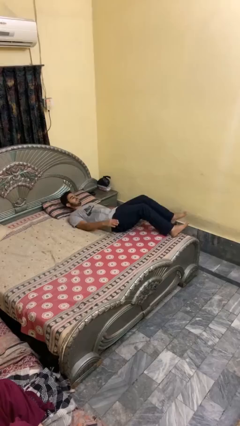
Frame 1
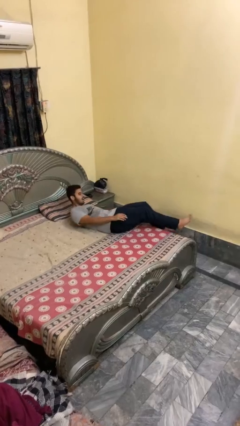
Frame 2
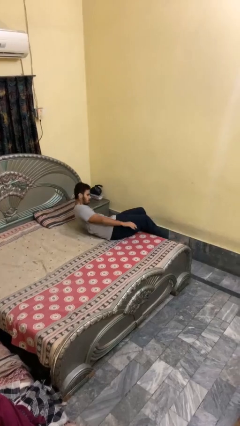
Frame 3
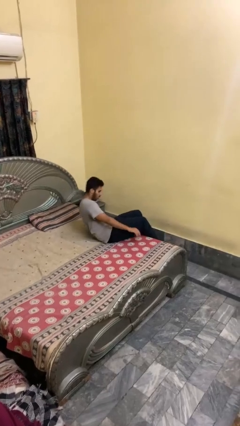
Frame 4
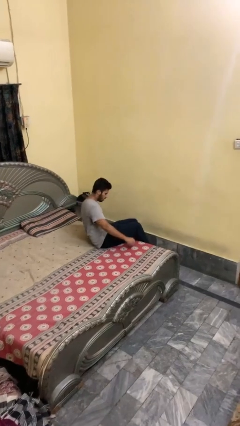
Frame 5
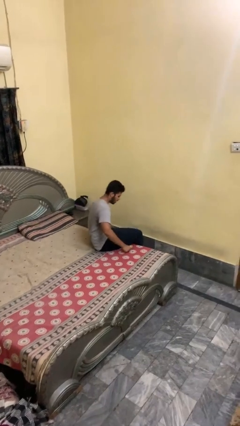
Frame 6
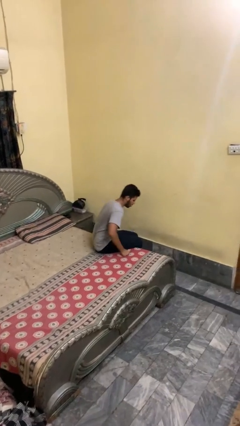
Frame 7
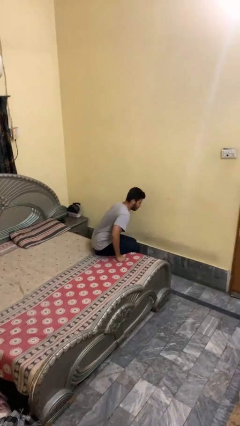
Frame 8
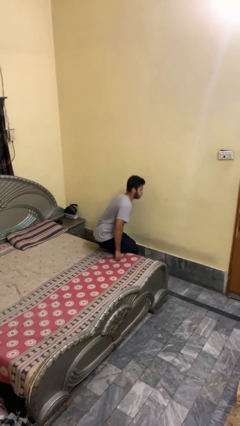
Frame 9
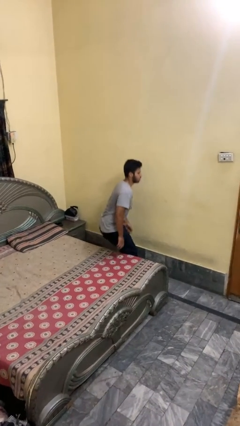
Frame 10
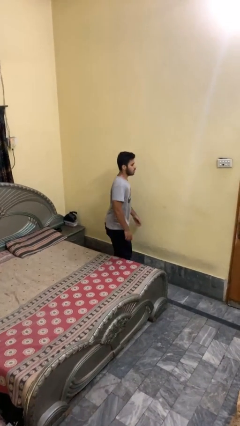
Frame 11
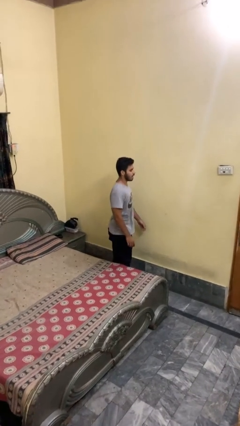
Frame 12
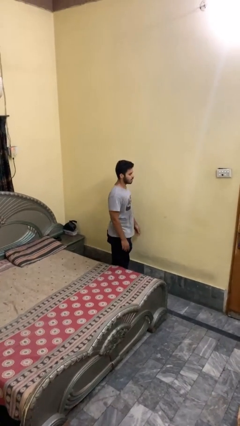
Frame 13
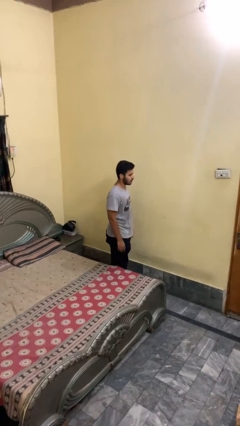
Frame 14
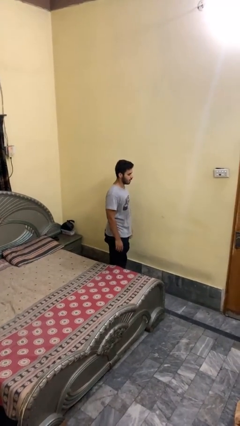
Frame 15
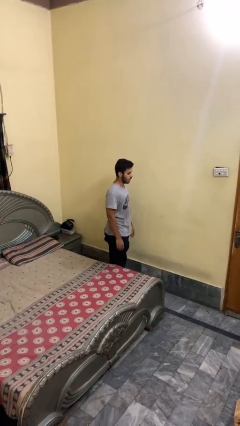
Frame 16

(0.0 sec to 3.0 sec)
person stands up

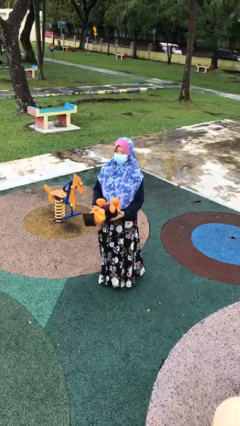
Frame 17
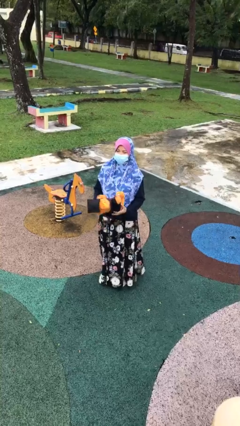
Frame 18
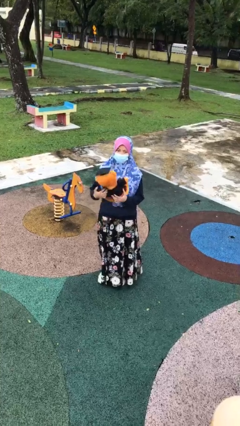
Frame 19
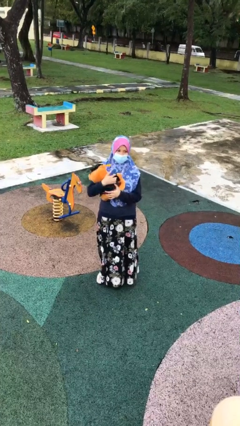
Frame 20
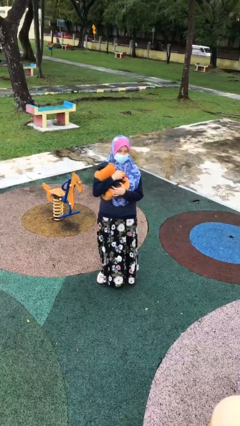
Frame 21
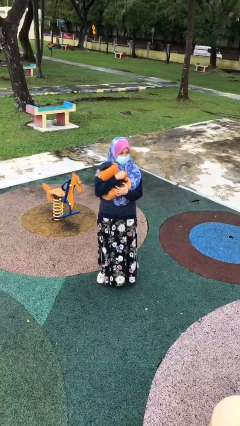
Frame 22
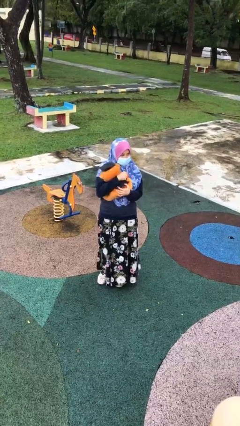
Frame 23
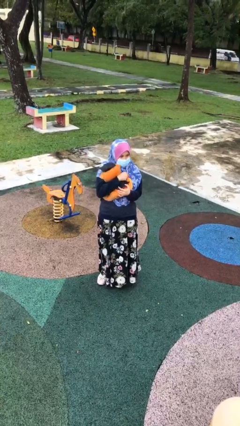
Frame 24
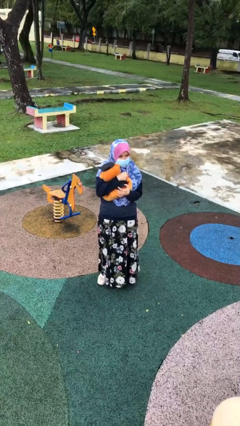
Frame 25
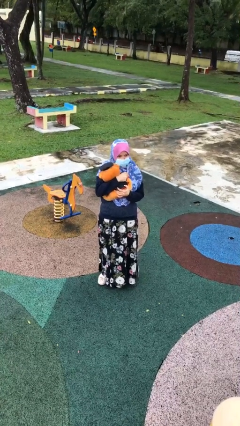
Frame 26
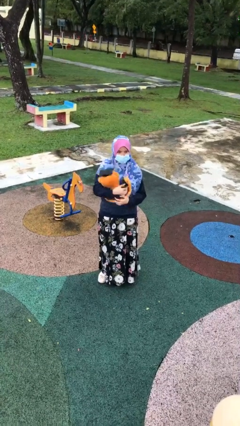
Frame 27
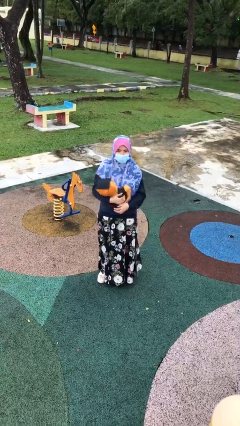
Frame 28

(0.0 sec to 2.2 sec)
person hugs stuffed animal

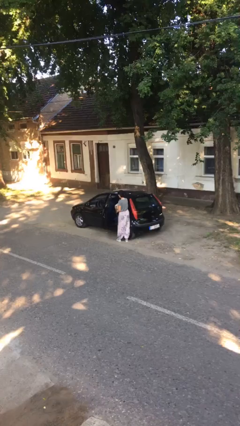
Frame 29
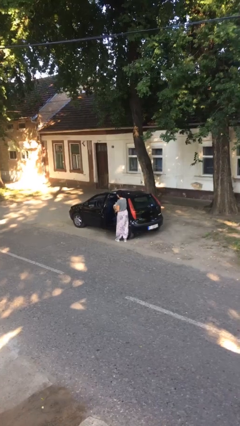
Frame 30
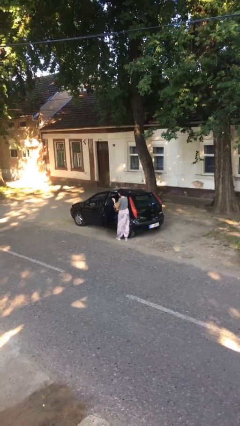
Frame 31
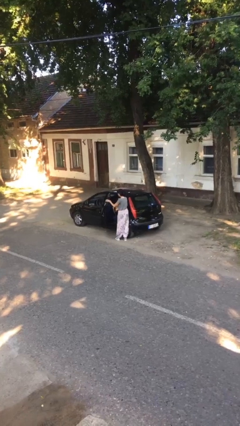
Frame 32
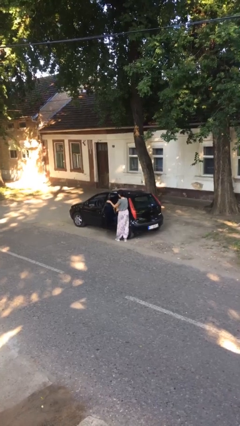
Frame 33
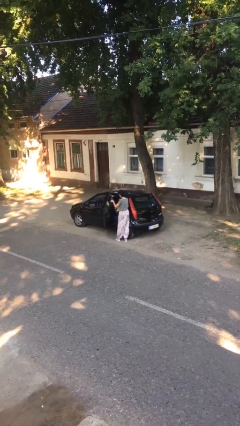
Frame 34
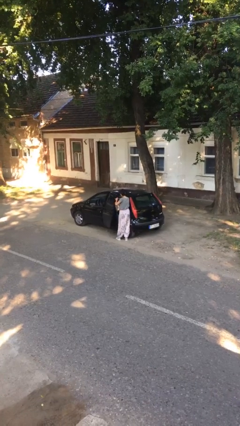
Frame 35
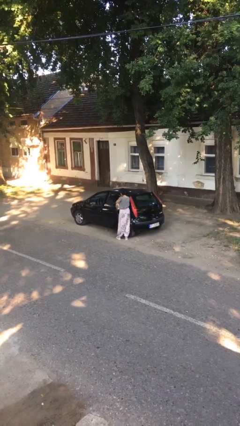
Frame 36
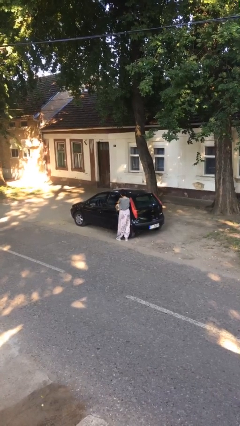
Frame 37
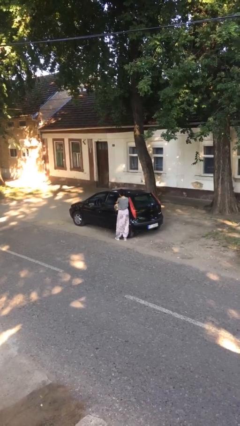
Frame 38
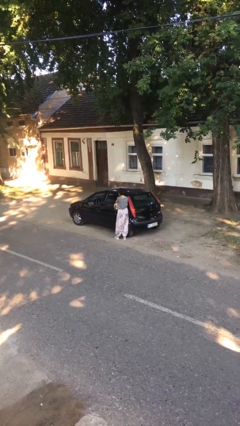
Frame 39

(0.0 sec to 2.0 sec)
person closes car door

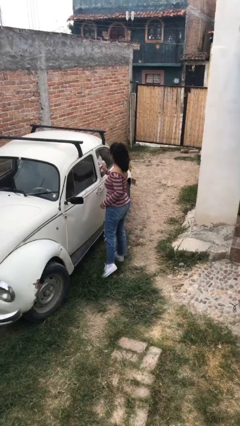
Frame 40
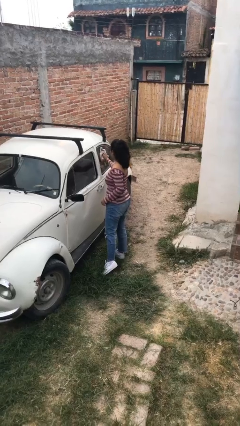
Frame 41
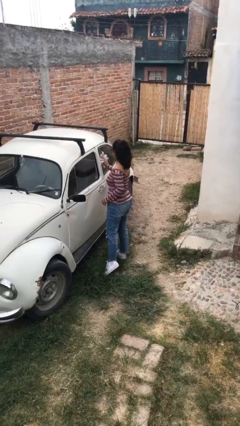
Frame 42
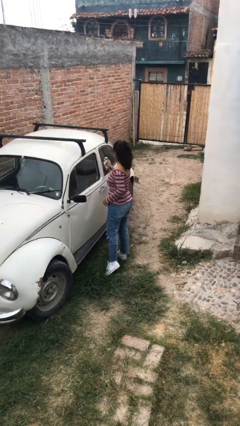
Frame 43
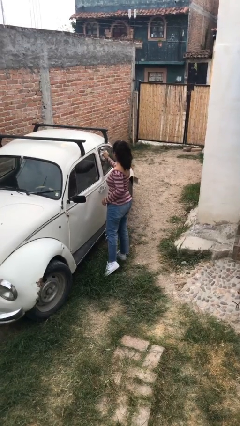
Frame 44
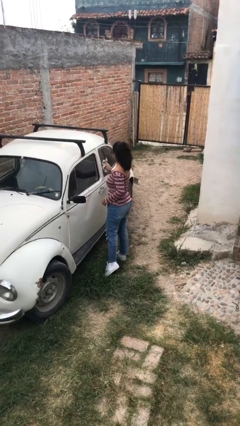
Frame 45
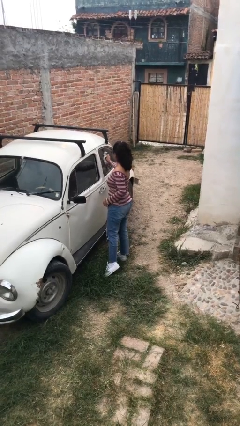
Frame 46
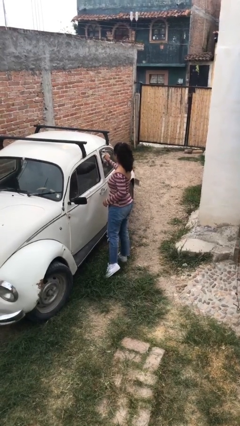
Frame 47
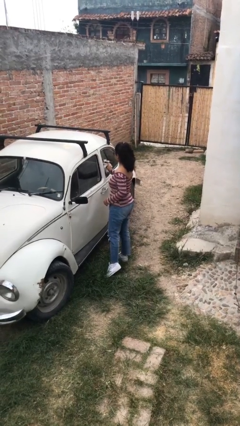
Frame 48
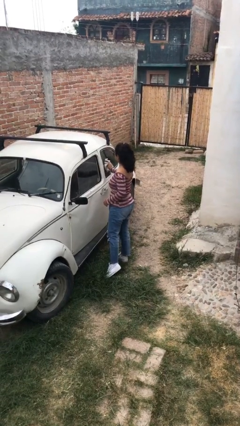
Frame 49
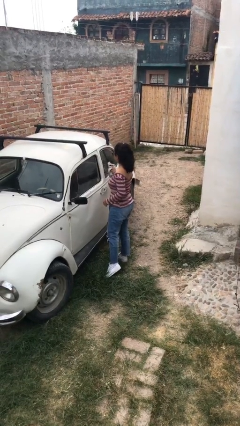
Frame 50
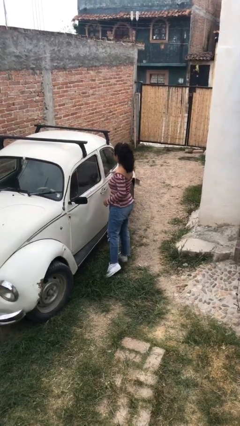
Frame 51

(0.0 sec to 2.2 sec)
person polishes car with rag

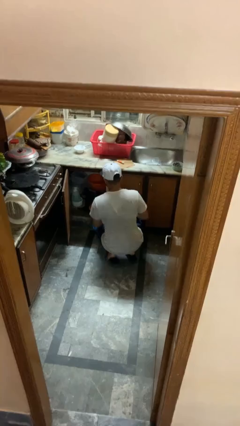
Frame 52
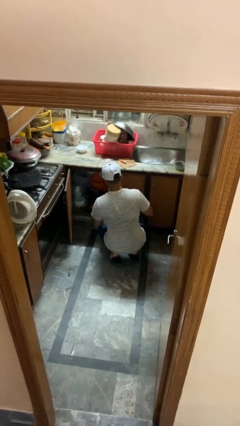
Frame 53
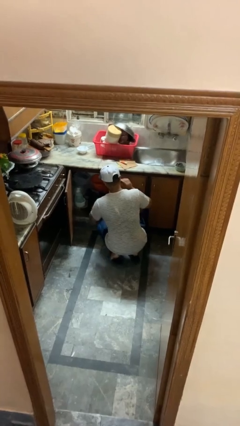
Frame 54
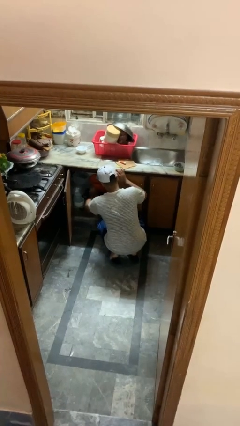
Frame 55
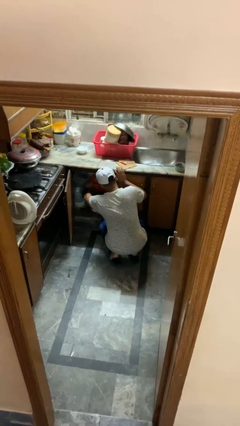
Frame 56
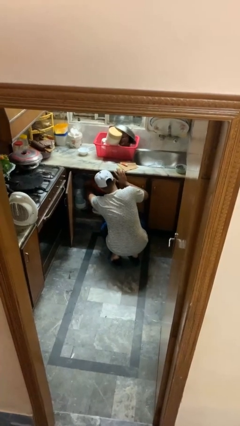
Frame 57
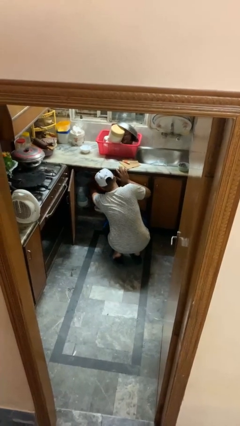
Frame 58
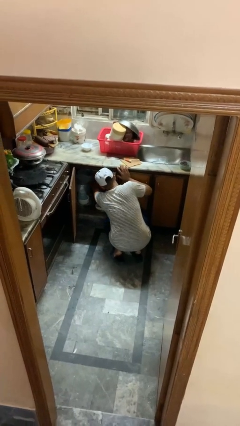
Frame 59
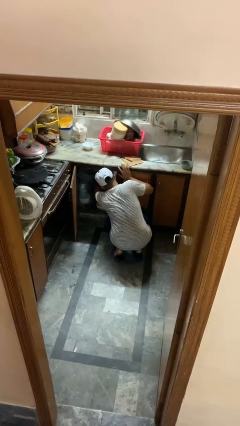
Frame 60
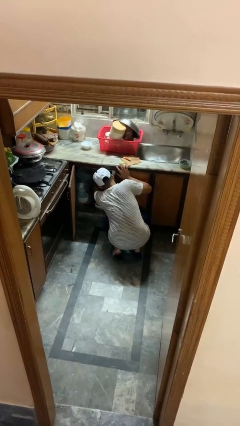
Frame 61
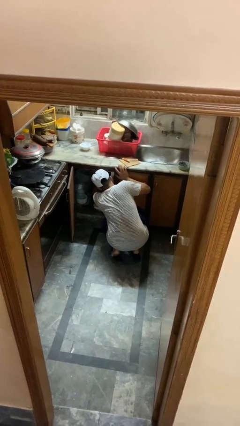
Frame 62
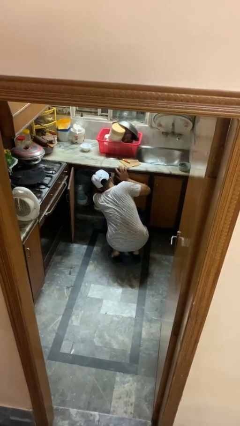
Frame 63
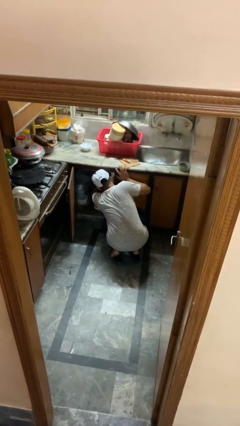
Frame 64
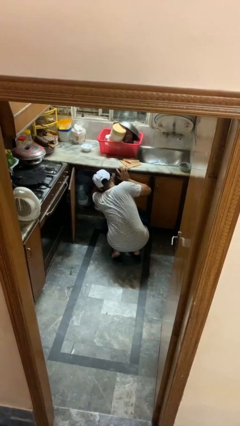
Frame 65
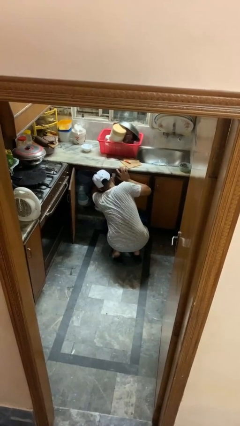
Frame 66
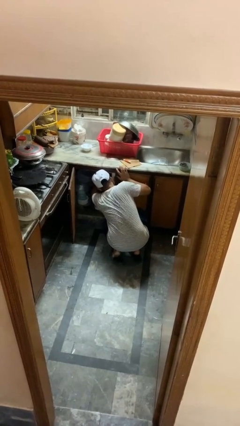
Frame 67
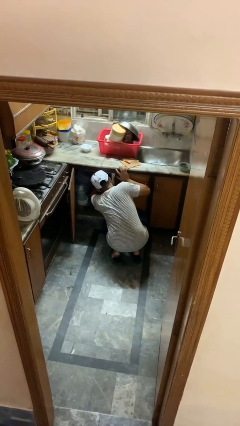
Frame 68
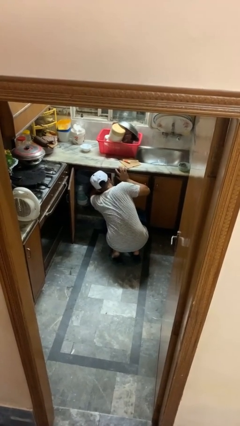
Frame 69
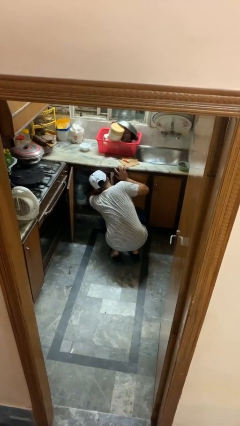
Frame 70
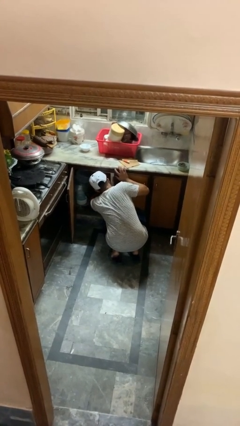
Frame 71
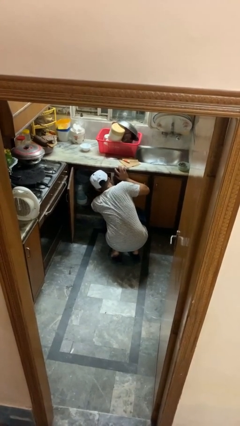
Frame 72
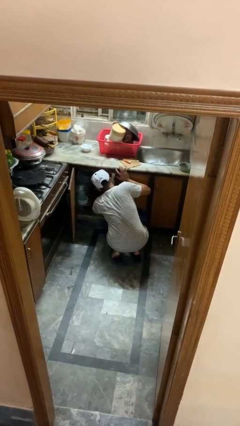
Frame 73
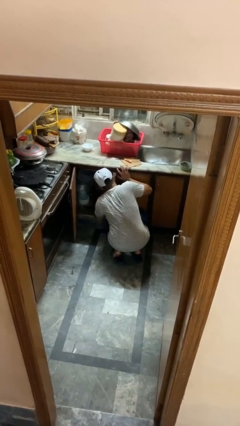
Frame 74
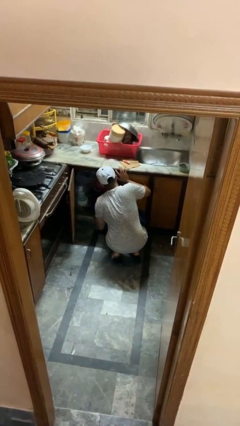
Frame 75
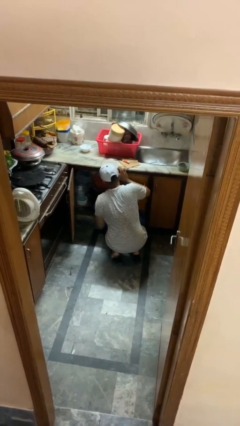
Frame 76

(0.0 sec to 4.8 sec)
person searches in kitchen drawer

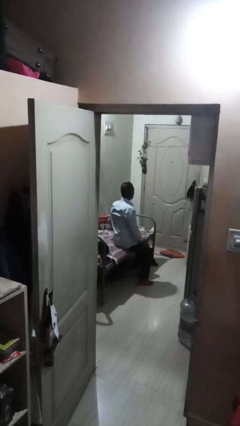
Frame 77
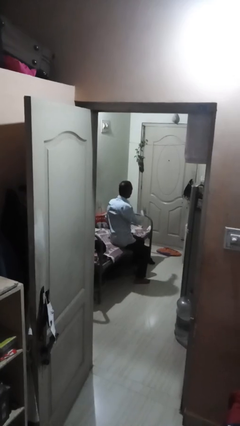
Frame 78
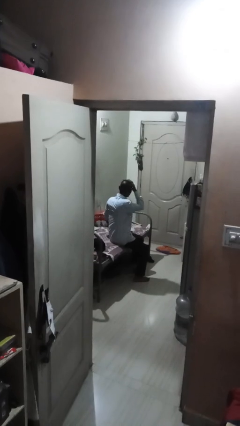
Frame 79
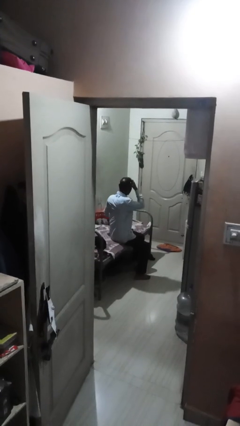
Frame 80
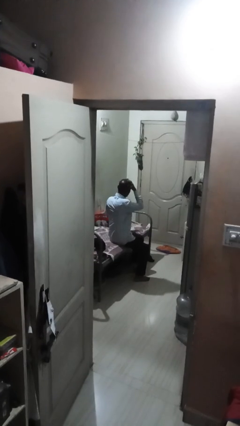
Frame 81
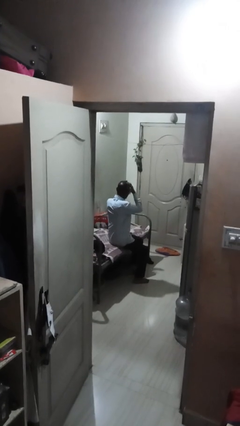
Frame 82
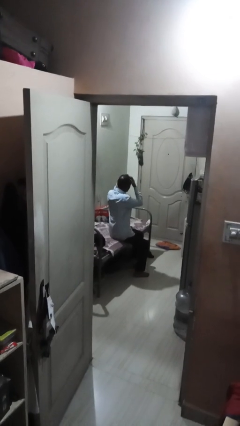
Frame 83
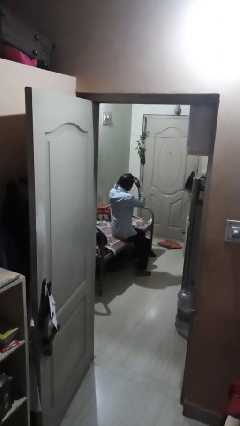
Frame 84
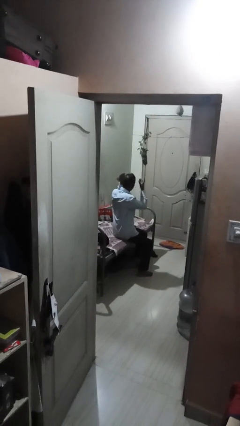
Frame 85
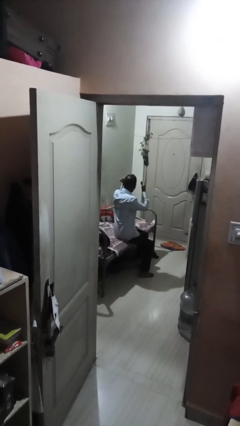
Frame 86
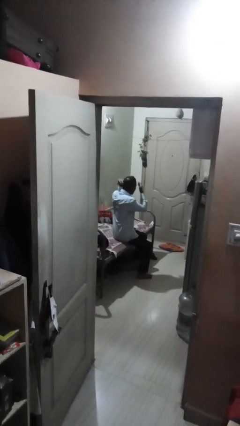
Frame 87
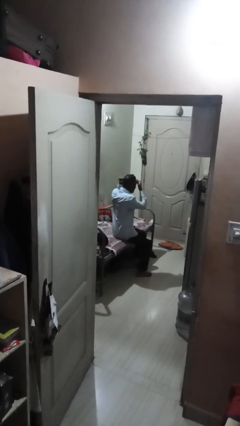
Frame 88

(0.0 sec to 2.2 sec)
person strokes hair

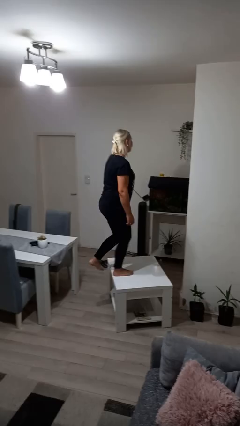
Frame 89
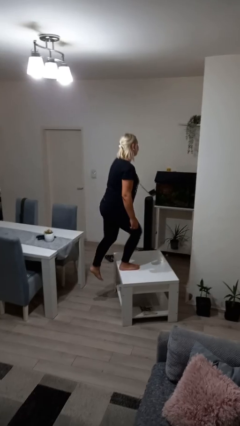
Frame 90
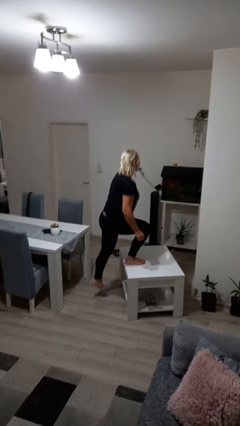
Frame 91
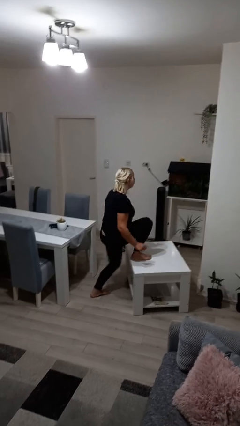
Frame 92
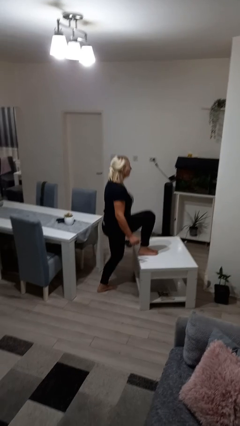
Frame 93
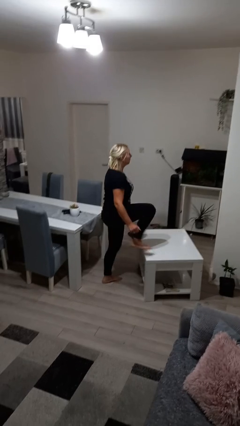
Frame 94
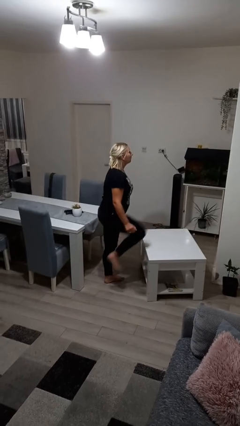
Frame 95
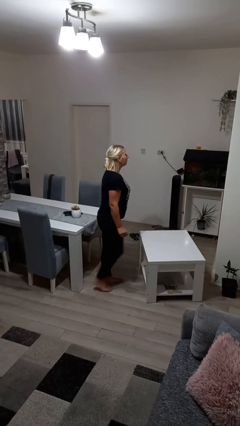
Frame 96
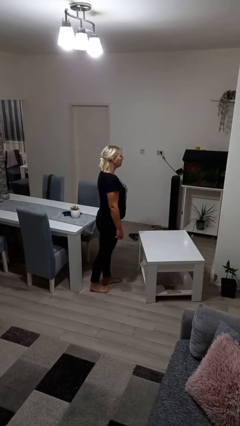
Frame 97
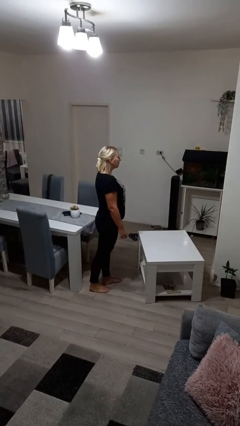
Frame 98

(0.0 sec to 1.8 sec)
person climbs off table
